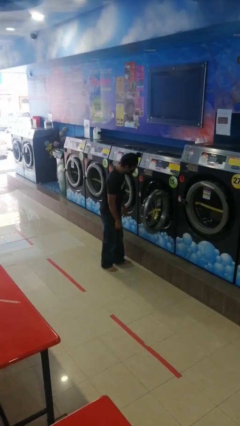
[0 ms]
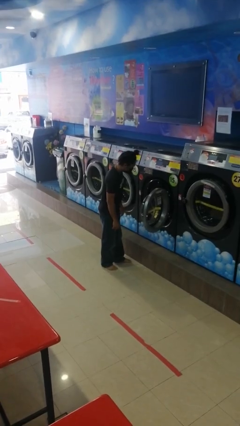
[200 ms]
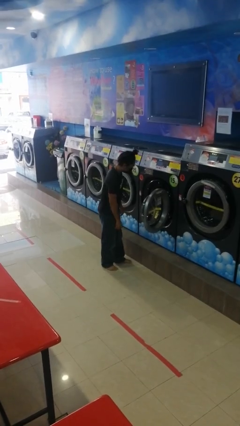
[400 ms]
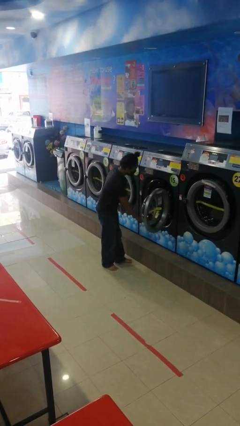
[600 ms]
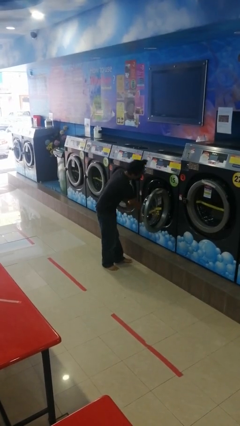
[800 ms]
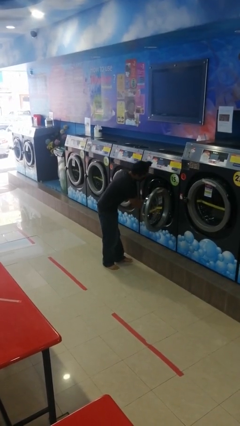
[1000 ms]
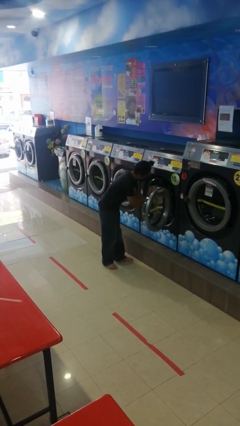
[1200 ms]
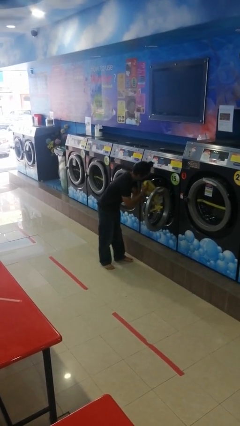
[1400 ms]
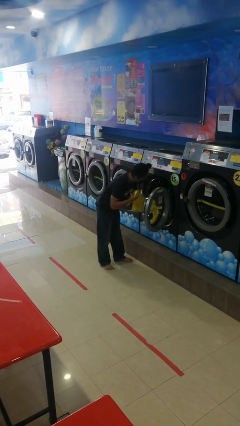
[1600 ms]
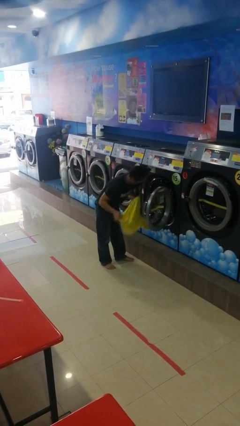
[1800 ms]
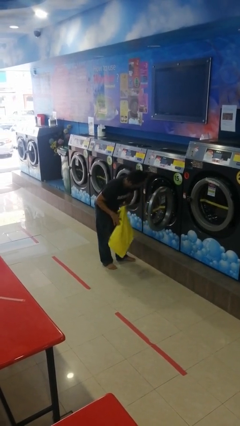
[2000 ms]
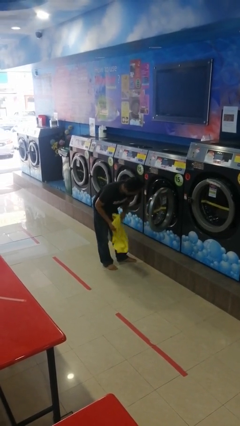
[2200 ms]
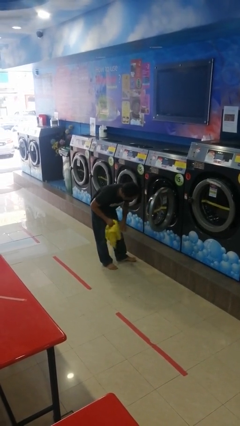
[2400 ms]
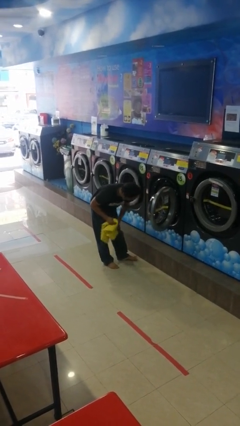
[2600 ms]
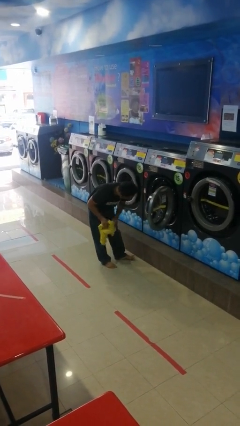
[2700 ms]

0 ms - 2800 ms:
person unloads clotheswasher

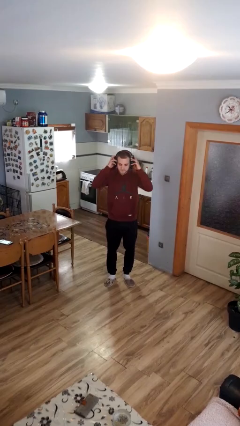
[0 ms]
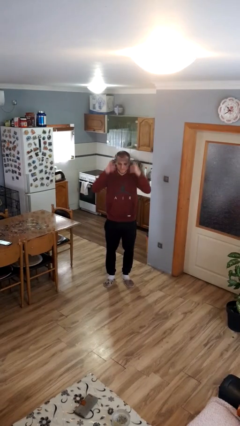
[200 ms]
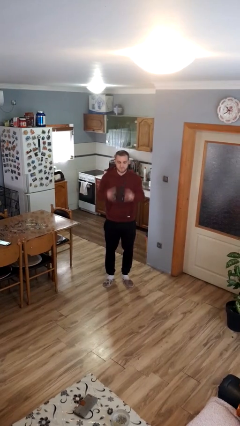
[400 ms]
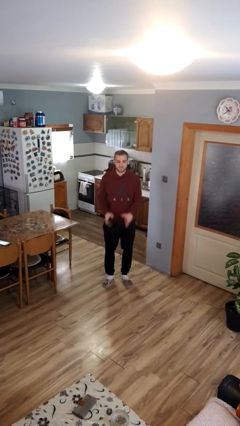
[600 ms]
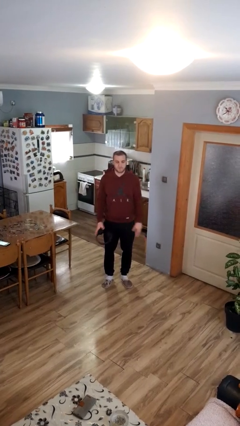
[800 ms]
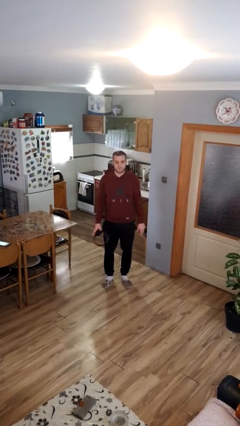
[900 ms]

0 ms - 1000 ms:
person takes off headphones

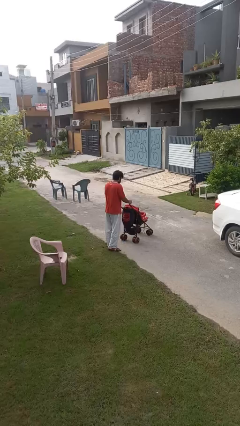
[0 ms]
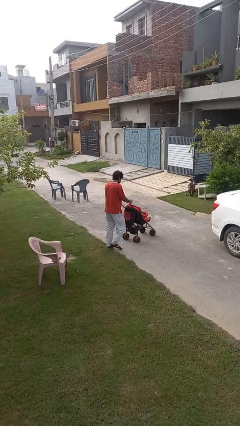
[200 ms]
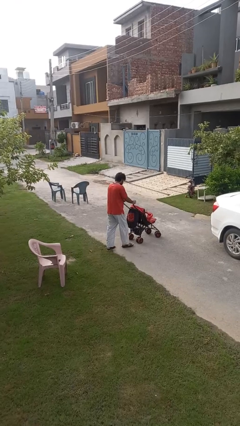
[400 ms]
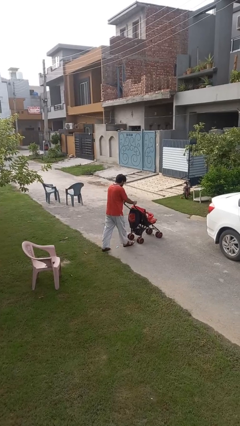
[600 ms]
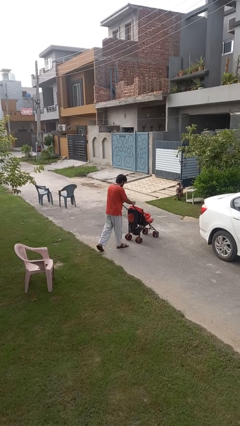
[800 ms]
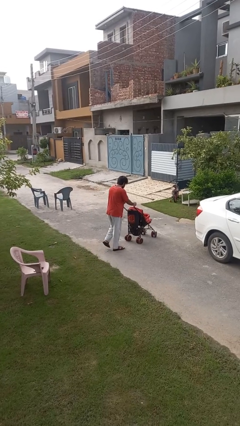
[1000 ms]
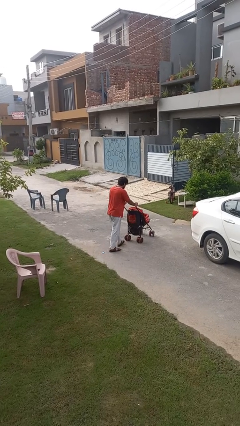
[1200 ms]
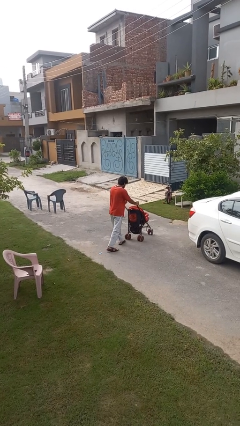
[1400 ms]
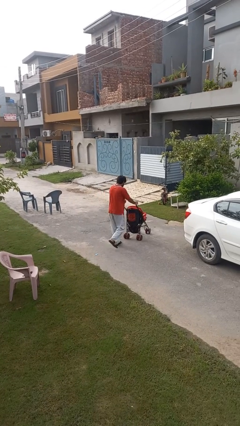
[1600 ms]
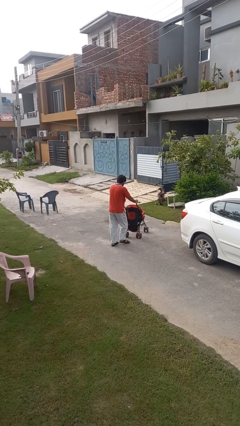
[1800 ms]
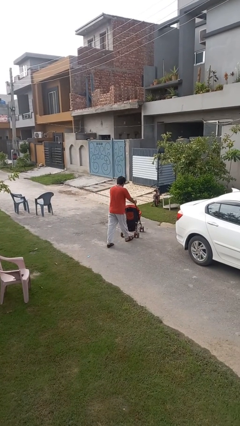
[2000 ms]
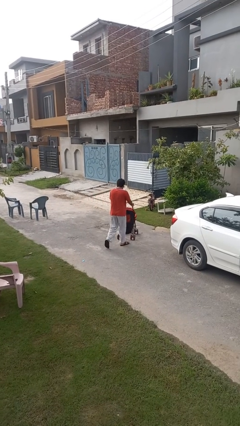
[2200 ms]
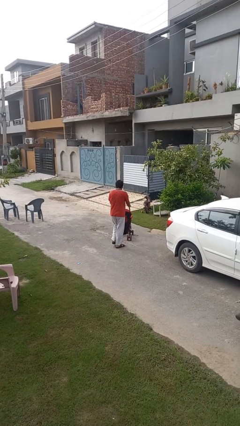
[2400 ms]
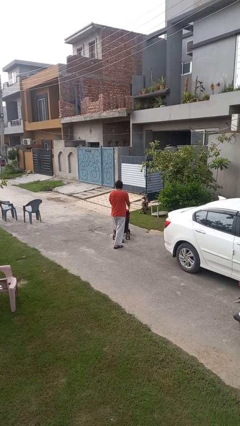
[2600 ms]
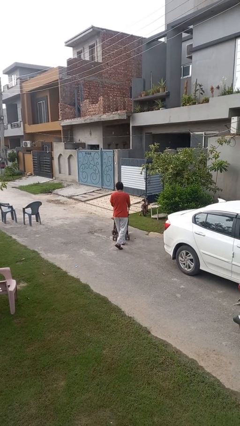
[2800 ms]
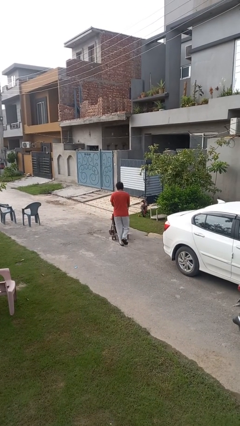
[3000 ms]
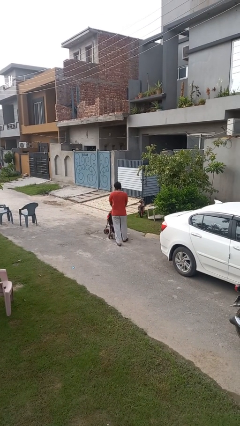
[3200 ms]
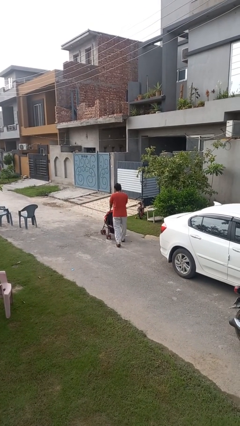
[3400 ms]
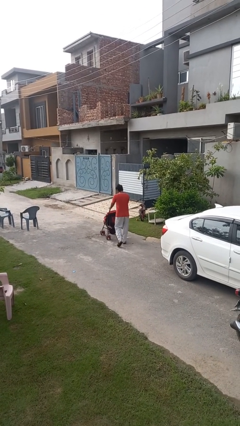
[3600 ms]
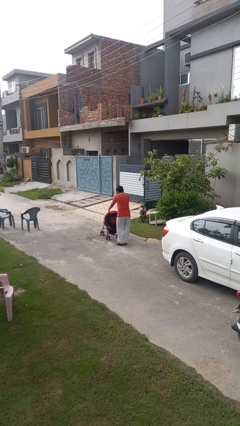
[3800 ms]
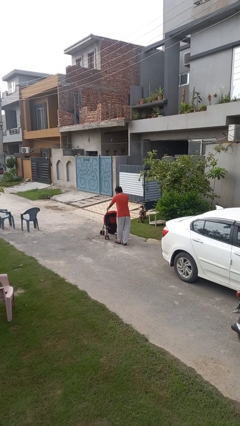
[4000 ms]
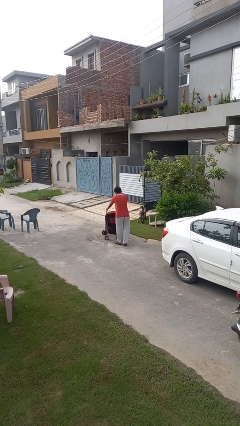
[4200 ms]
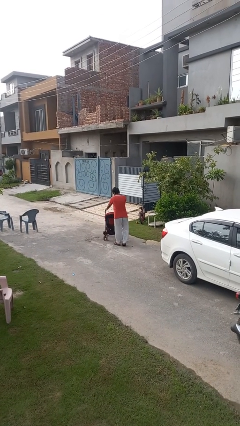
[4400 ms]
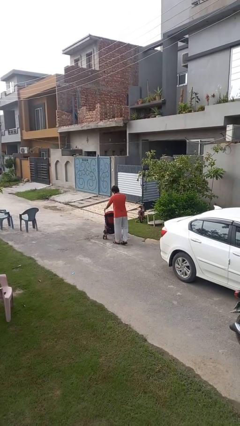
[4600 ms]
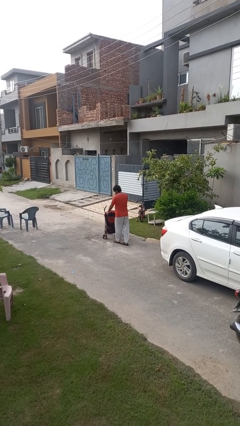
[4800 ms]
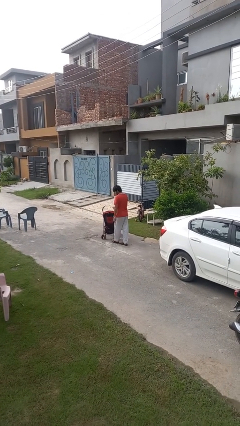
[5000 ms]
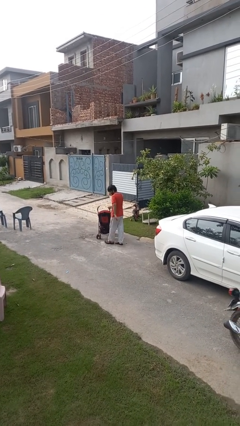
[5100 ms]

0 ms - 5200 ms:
person pushes wheeled cart

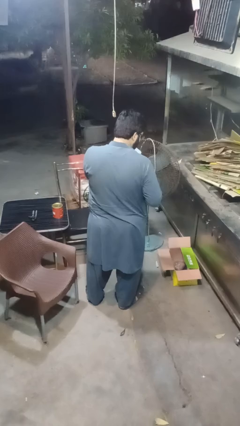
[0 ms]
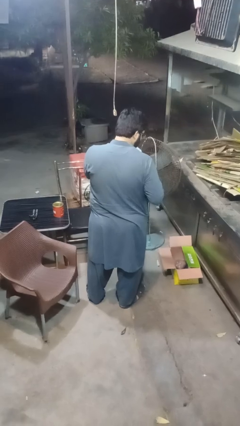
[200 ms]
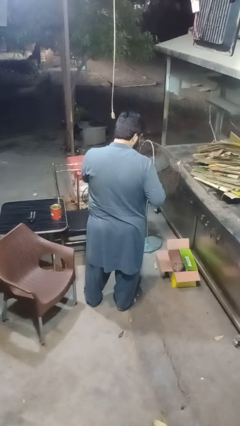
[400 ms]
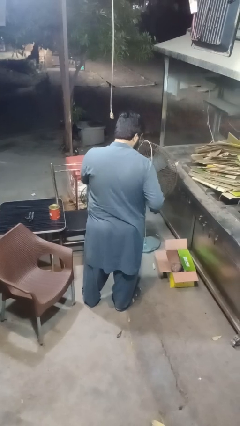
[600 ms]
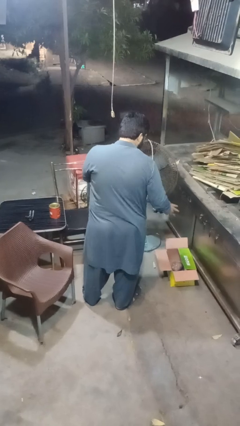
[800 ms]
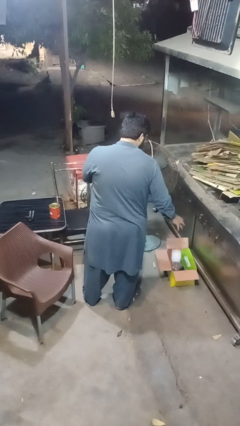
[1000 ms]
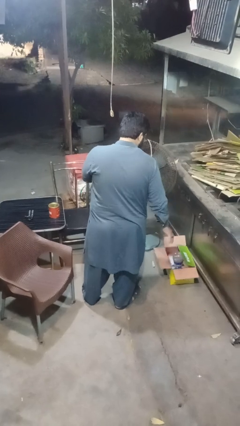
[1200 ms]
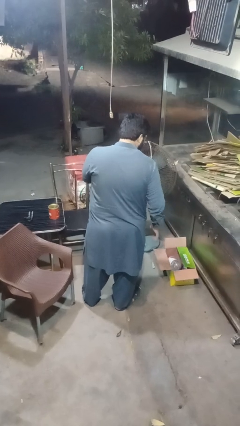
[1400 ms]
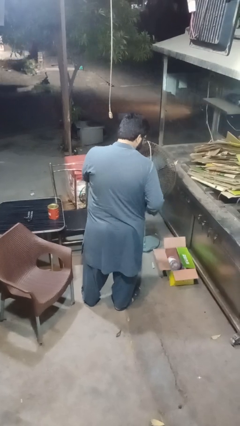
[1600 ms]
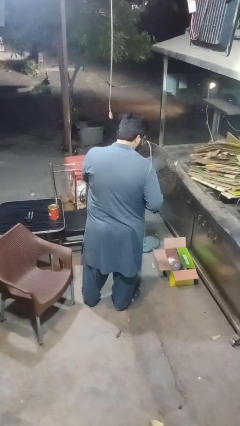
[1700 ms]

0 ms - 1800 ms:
person discards trash

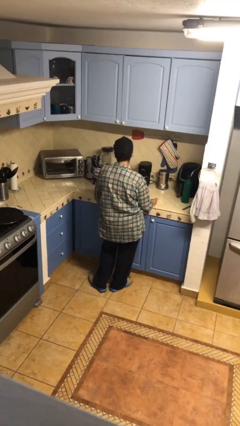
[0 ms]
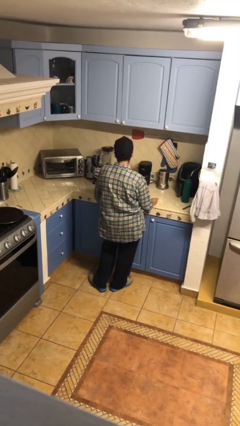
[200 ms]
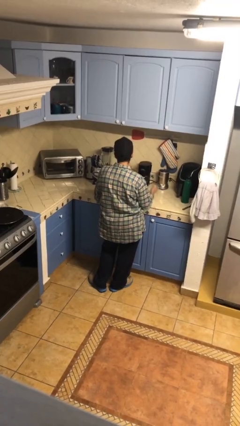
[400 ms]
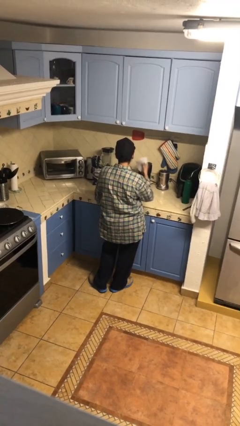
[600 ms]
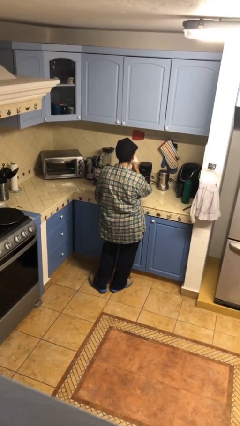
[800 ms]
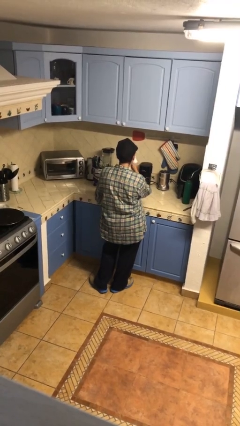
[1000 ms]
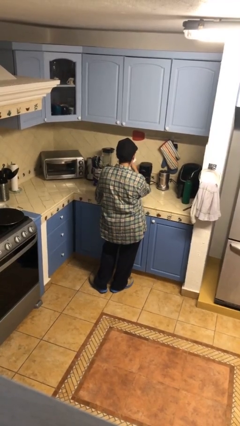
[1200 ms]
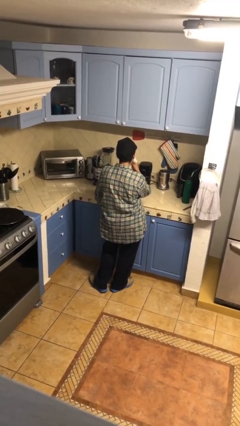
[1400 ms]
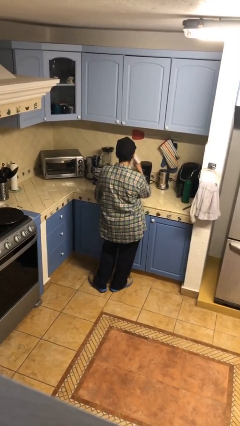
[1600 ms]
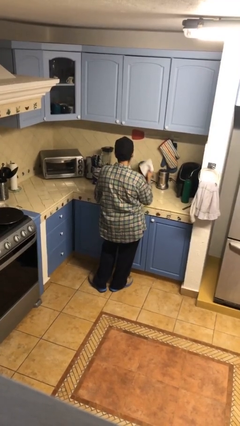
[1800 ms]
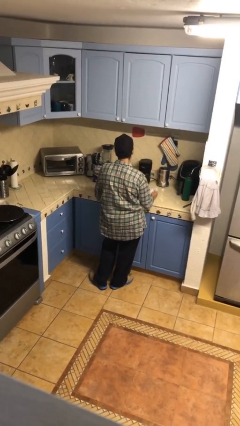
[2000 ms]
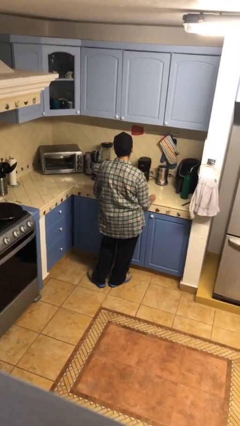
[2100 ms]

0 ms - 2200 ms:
person wipes mouth with napkin

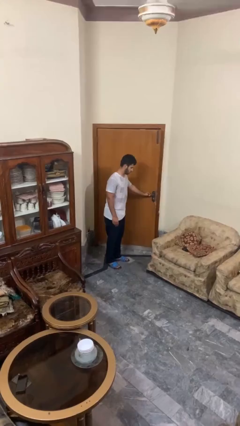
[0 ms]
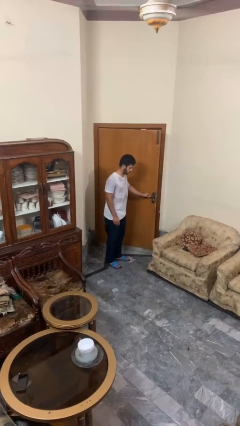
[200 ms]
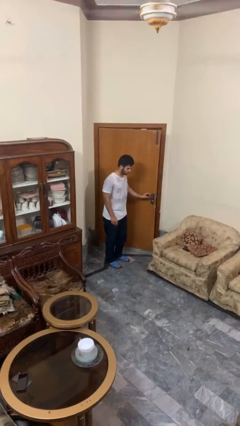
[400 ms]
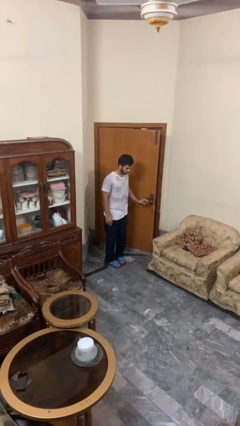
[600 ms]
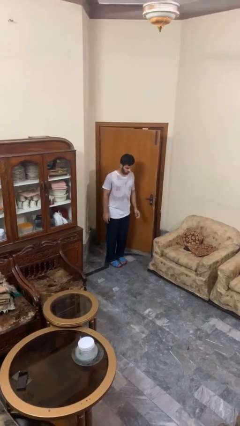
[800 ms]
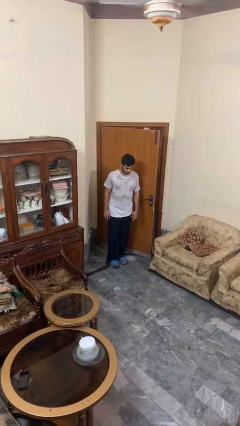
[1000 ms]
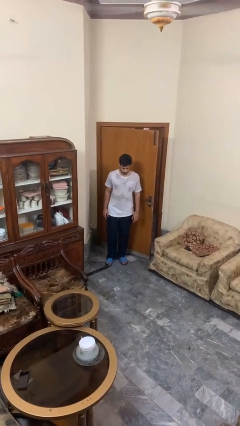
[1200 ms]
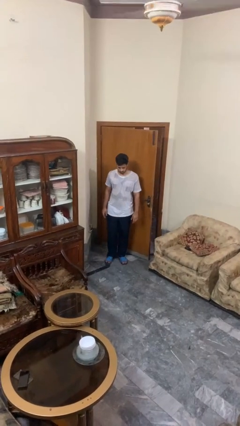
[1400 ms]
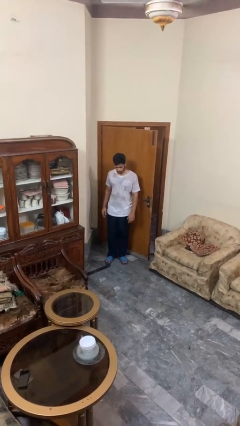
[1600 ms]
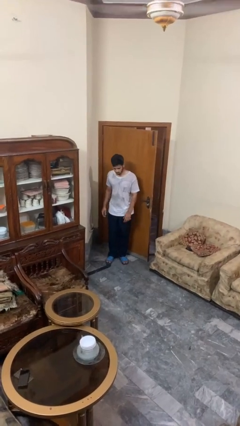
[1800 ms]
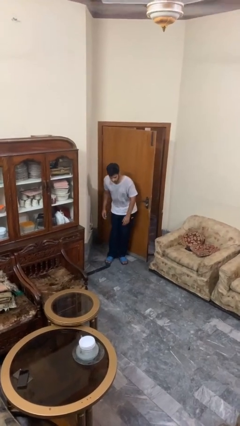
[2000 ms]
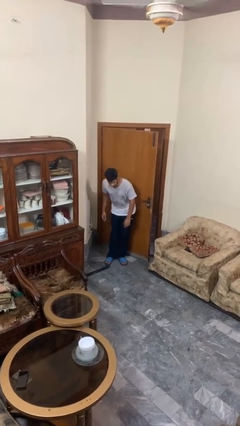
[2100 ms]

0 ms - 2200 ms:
person opens facility door

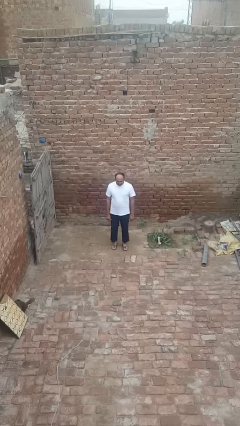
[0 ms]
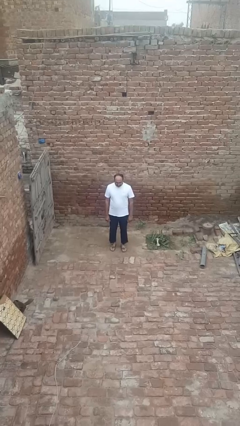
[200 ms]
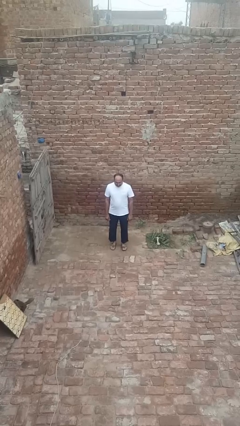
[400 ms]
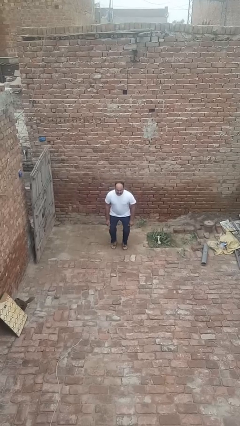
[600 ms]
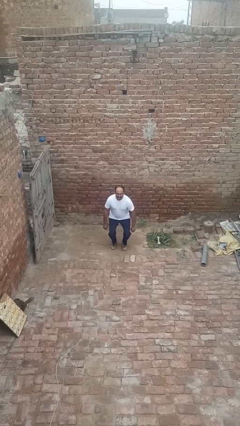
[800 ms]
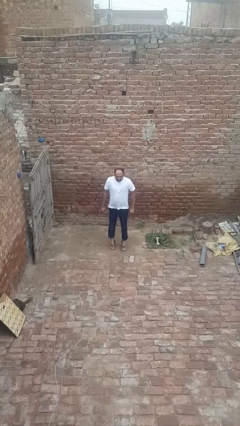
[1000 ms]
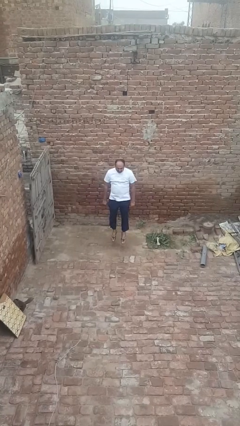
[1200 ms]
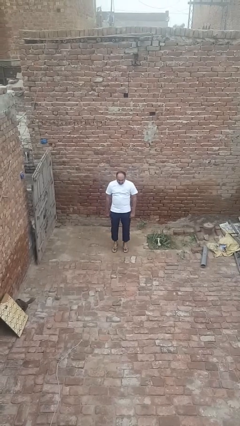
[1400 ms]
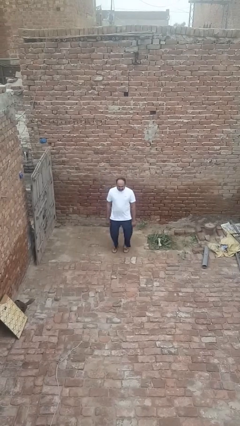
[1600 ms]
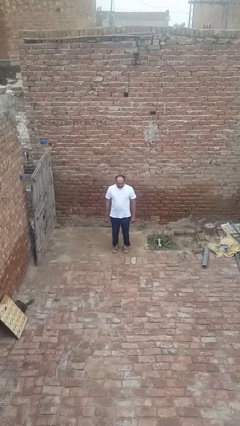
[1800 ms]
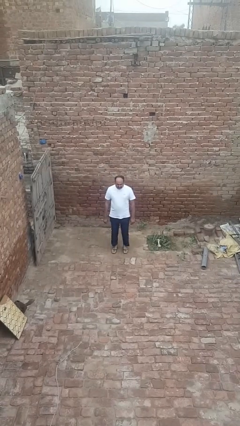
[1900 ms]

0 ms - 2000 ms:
person jumps

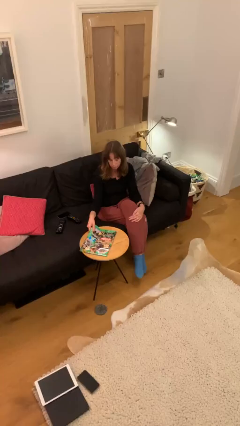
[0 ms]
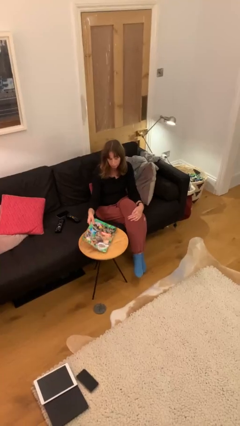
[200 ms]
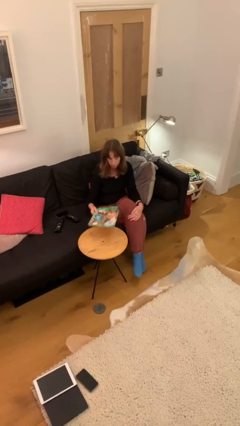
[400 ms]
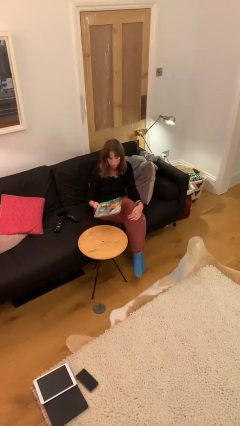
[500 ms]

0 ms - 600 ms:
person picks up object from table
